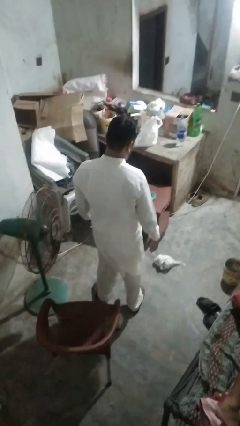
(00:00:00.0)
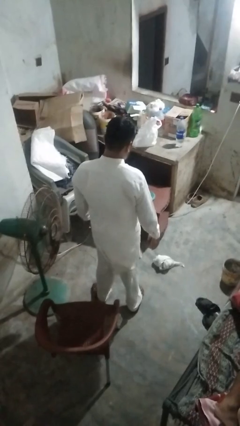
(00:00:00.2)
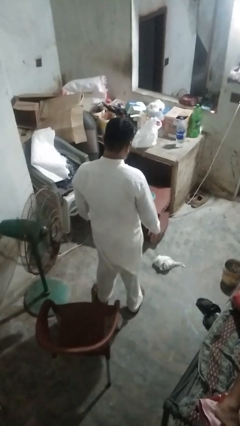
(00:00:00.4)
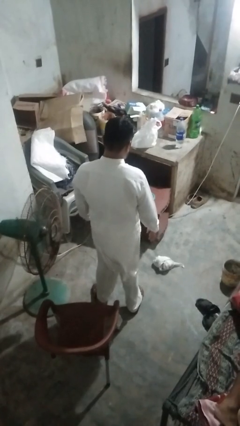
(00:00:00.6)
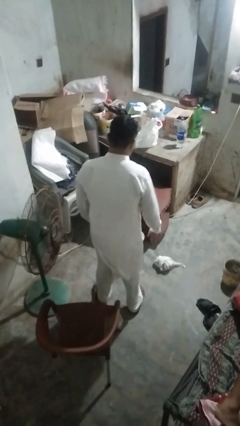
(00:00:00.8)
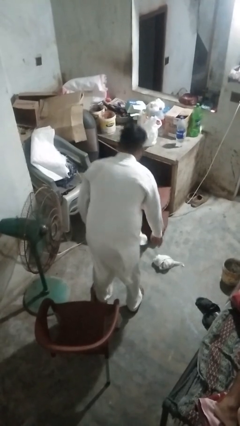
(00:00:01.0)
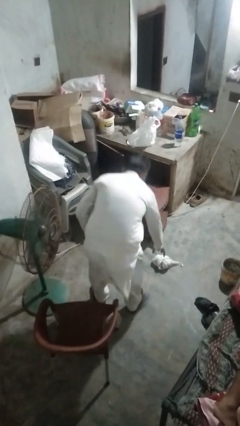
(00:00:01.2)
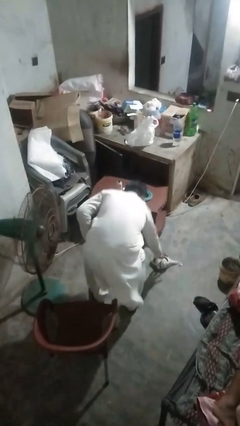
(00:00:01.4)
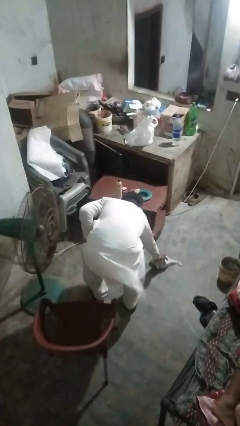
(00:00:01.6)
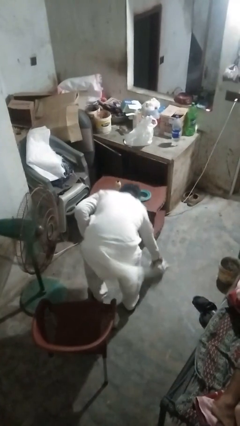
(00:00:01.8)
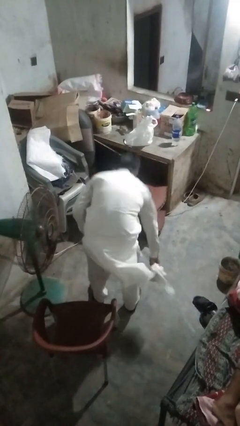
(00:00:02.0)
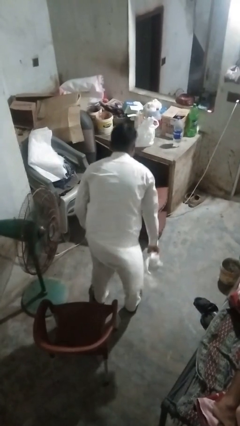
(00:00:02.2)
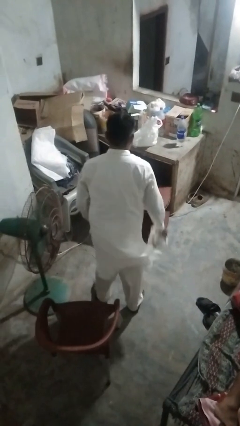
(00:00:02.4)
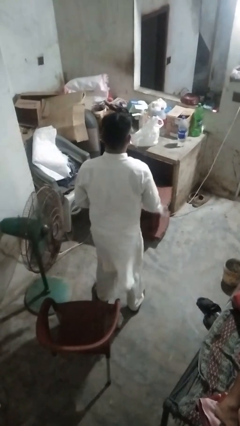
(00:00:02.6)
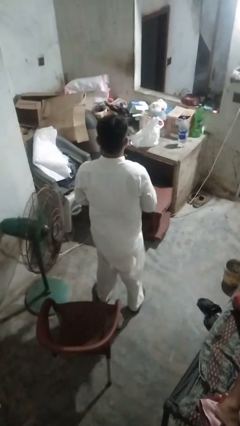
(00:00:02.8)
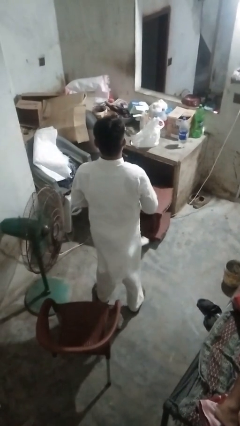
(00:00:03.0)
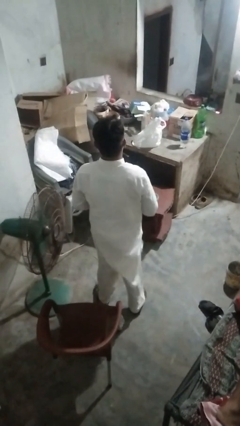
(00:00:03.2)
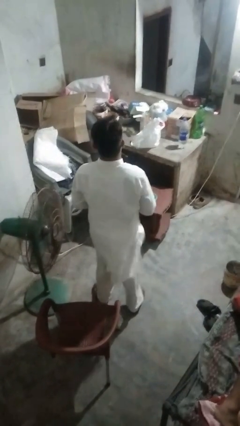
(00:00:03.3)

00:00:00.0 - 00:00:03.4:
person picks up object from floor

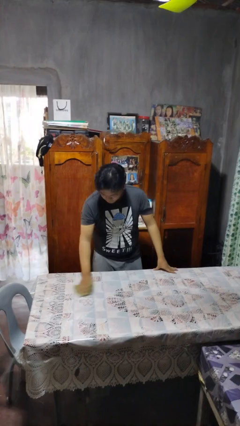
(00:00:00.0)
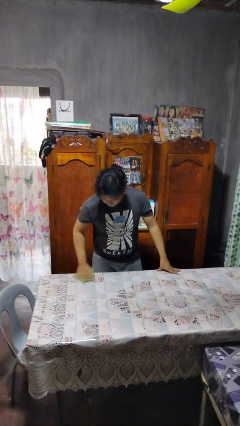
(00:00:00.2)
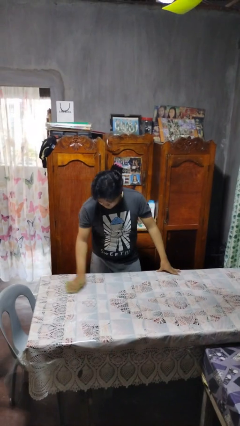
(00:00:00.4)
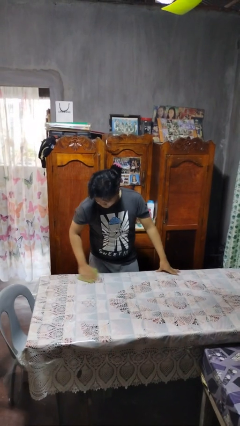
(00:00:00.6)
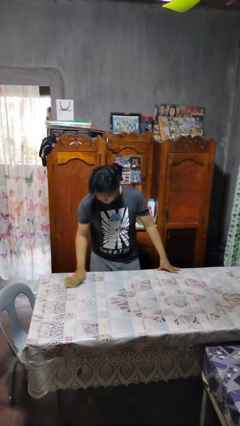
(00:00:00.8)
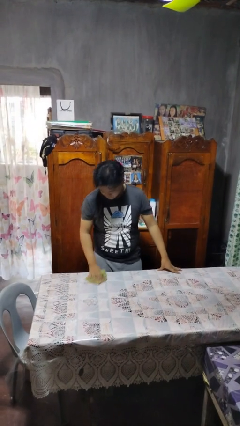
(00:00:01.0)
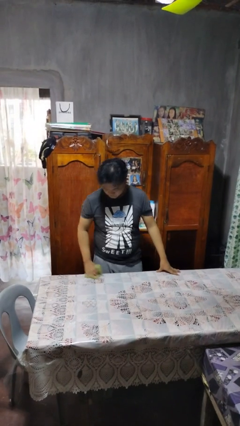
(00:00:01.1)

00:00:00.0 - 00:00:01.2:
person cleans table with rag

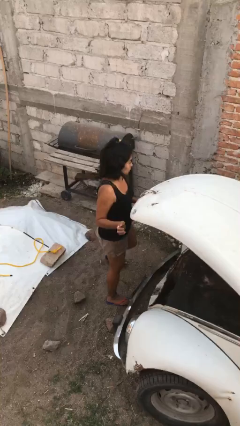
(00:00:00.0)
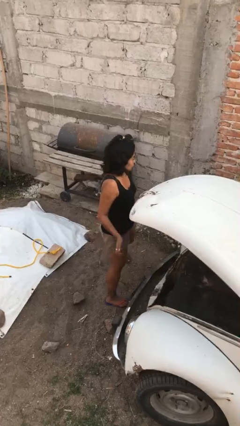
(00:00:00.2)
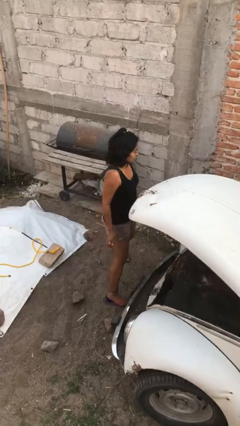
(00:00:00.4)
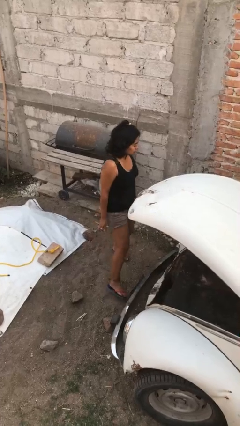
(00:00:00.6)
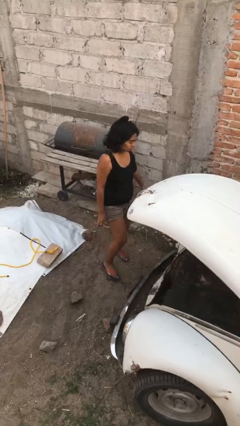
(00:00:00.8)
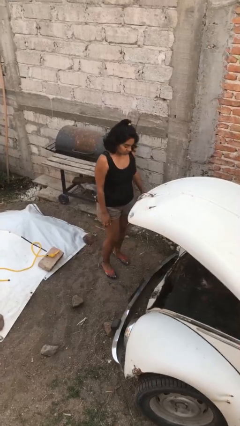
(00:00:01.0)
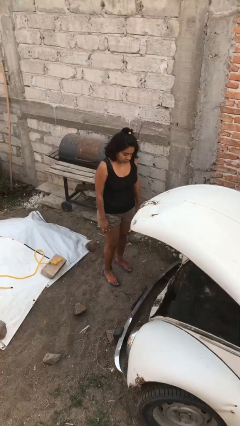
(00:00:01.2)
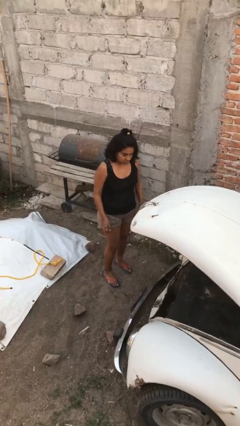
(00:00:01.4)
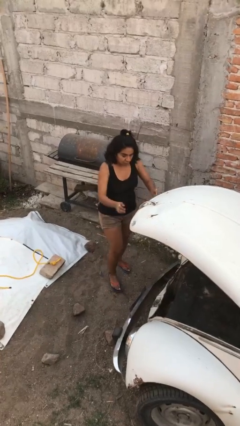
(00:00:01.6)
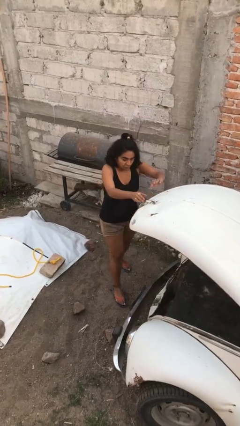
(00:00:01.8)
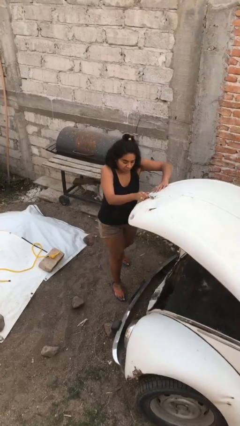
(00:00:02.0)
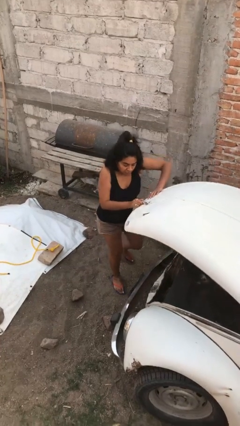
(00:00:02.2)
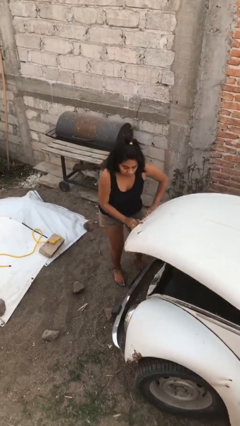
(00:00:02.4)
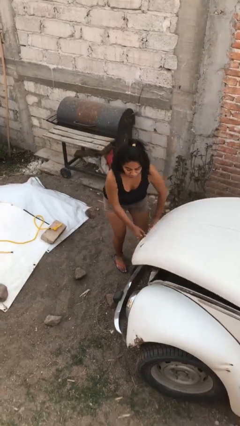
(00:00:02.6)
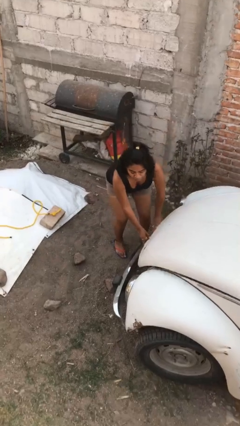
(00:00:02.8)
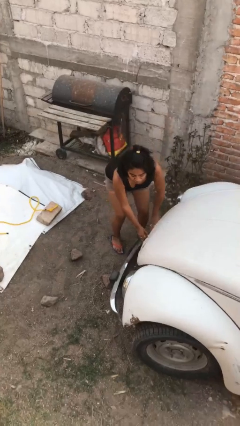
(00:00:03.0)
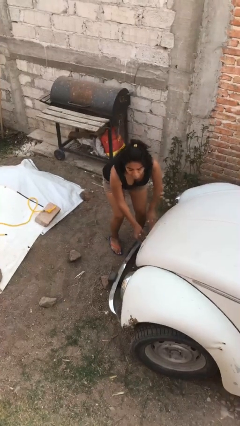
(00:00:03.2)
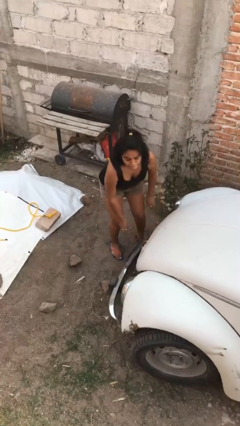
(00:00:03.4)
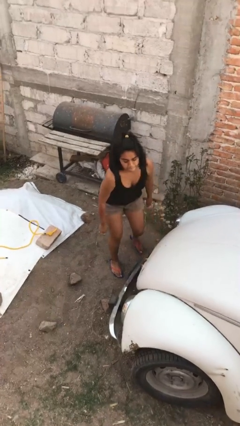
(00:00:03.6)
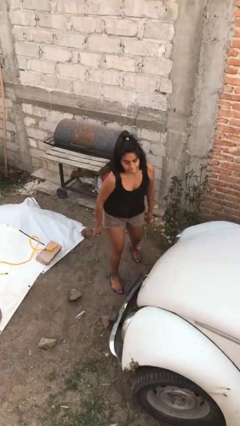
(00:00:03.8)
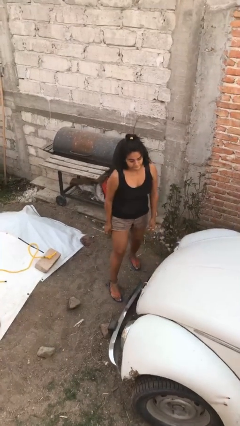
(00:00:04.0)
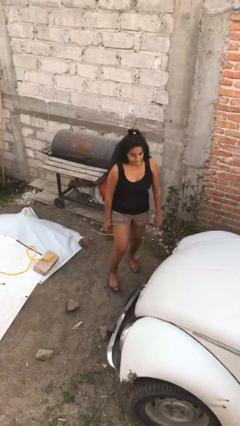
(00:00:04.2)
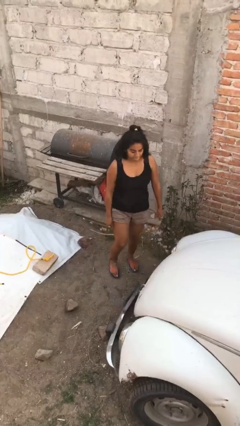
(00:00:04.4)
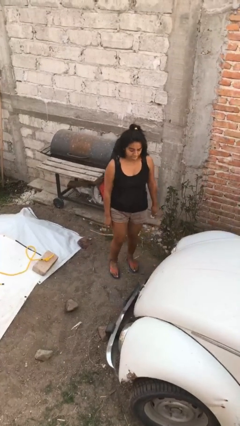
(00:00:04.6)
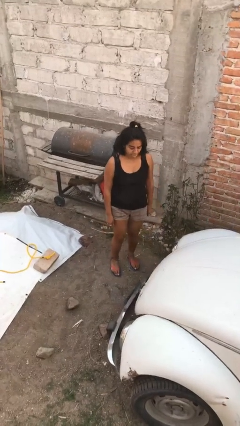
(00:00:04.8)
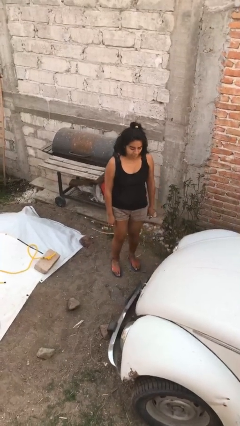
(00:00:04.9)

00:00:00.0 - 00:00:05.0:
person closes car trunk

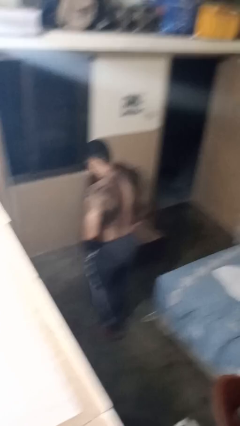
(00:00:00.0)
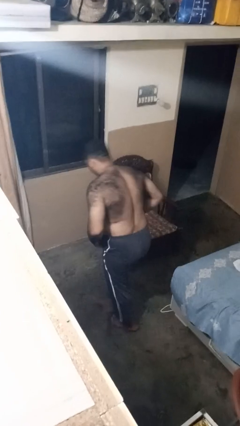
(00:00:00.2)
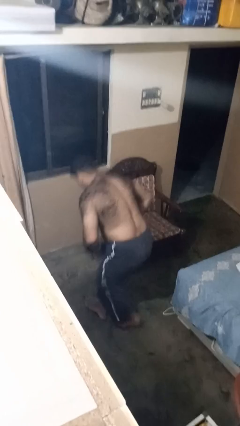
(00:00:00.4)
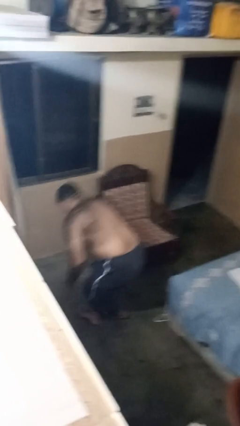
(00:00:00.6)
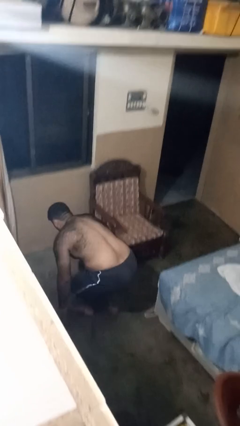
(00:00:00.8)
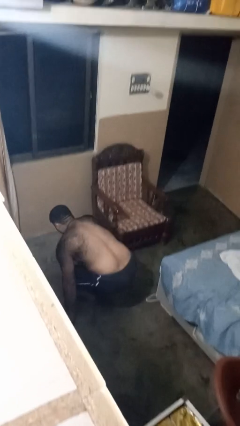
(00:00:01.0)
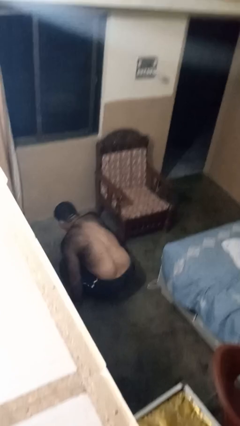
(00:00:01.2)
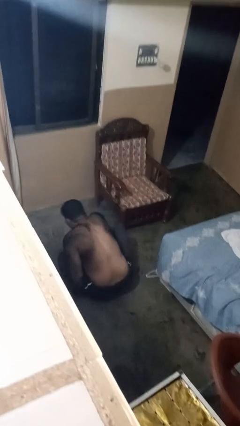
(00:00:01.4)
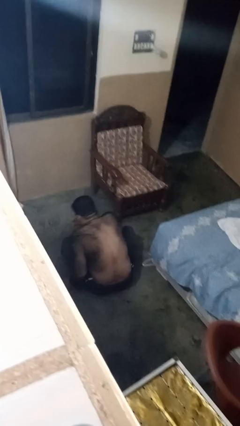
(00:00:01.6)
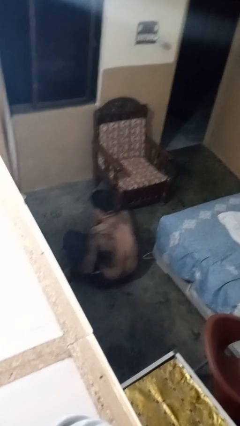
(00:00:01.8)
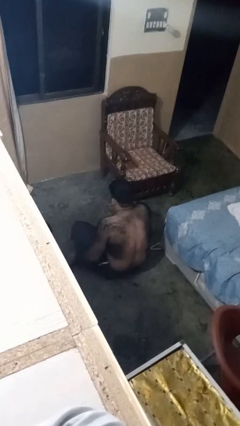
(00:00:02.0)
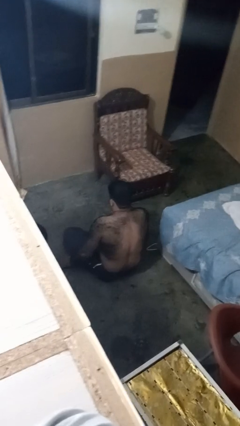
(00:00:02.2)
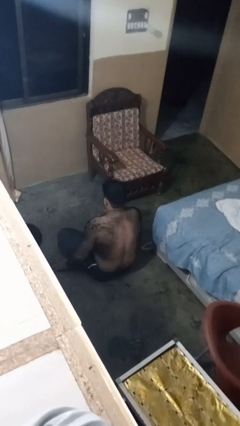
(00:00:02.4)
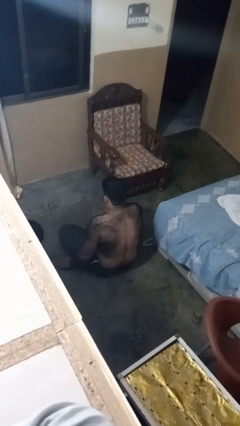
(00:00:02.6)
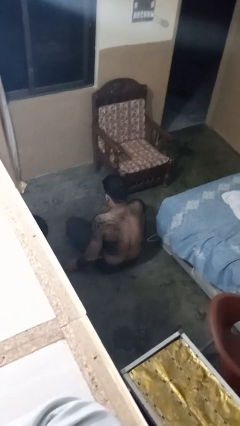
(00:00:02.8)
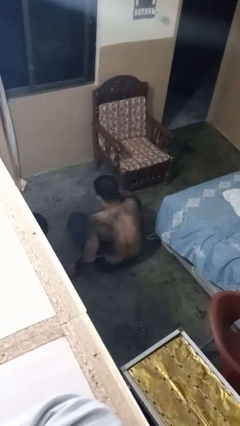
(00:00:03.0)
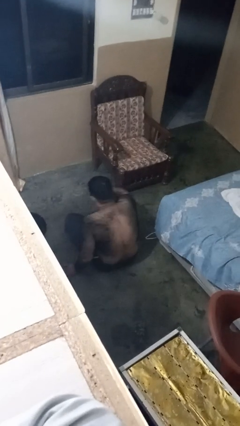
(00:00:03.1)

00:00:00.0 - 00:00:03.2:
person crosses legs

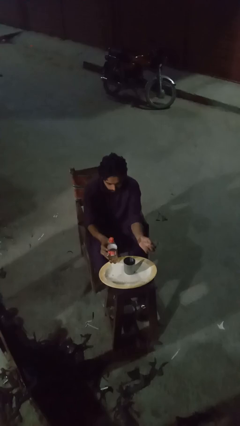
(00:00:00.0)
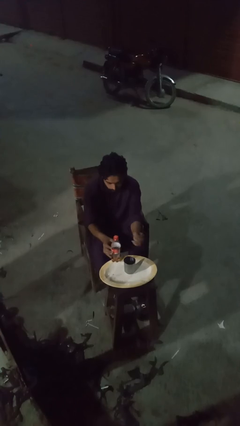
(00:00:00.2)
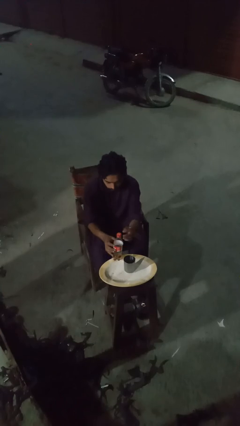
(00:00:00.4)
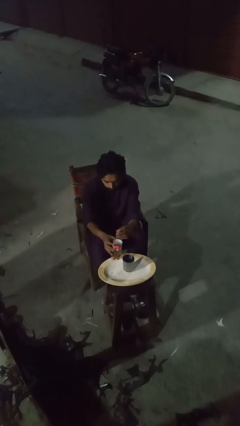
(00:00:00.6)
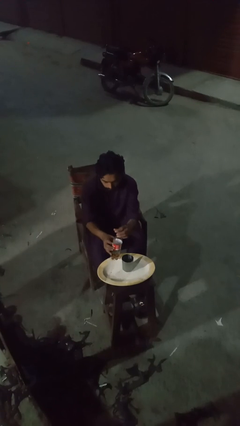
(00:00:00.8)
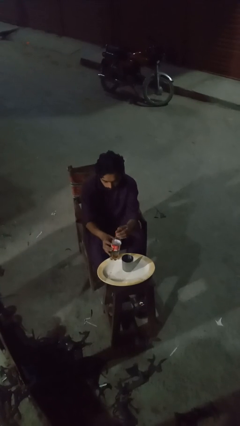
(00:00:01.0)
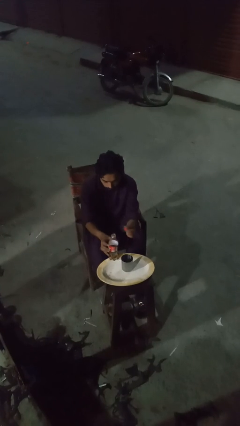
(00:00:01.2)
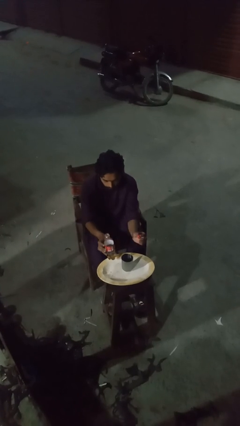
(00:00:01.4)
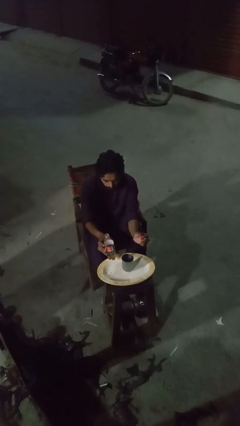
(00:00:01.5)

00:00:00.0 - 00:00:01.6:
person unscrews lid from bottle

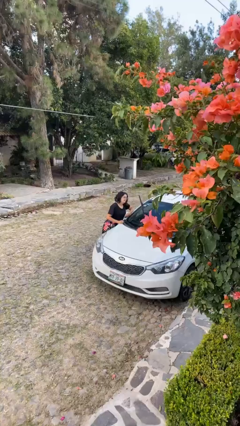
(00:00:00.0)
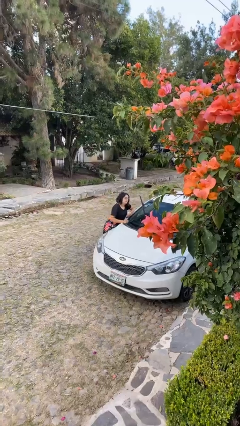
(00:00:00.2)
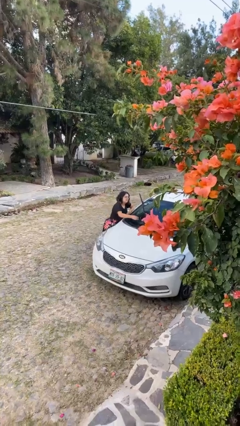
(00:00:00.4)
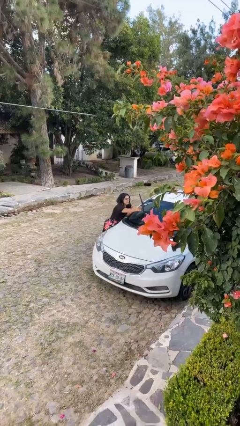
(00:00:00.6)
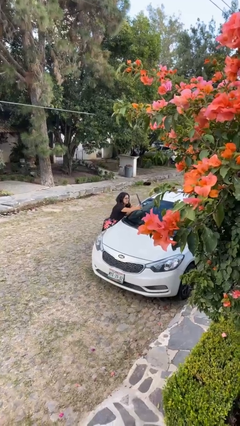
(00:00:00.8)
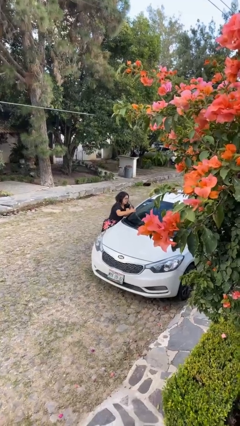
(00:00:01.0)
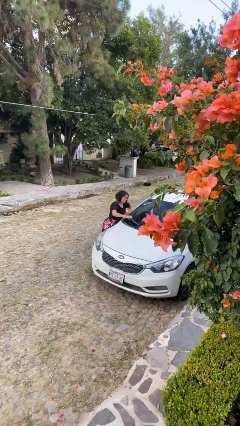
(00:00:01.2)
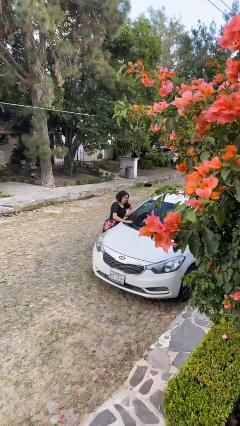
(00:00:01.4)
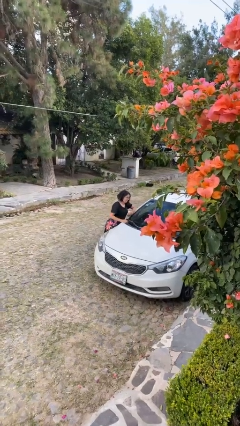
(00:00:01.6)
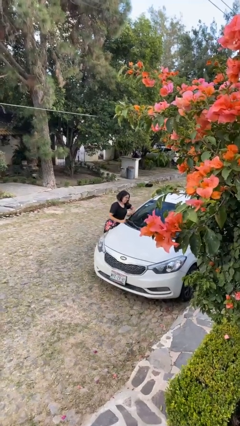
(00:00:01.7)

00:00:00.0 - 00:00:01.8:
person flips down car wipers

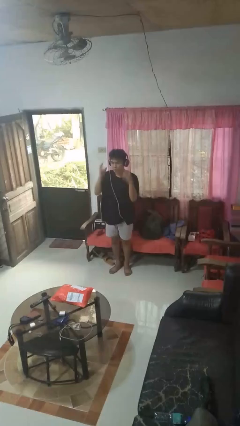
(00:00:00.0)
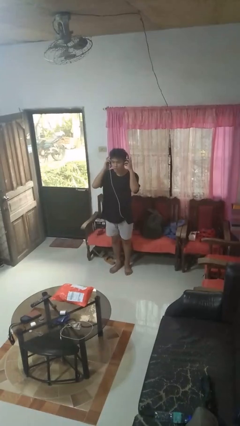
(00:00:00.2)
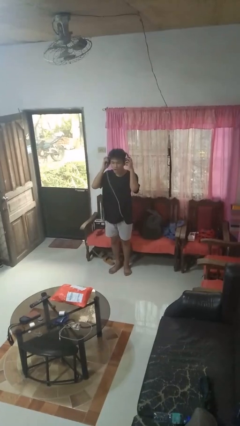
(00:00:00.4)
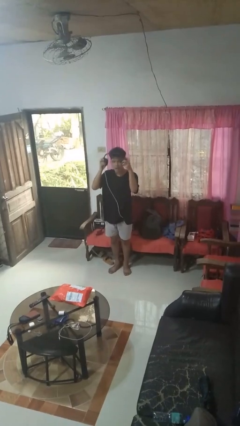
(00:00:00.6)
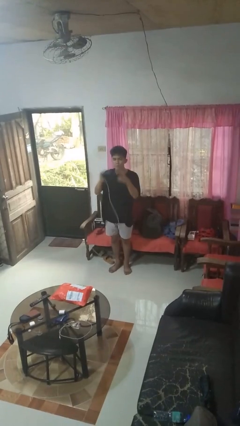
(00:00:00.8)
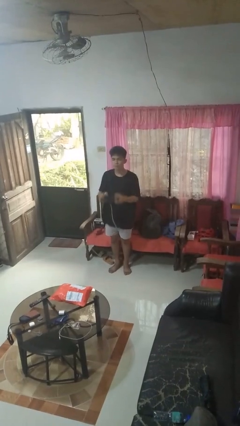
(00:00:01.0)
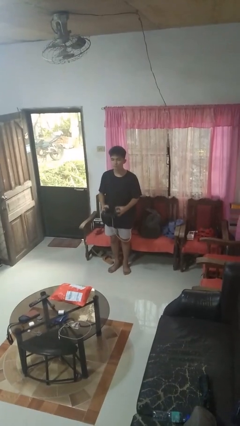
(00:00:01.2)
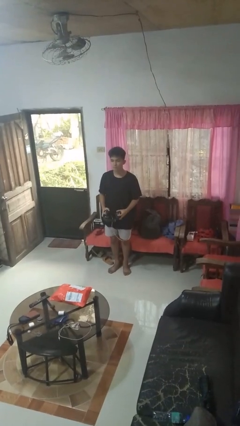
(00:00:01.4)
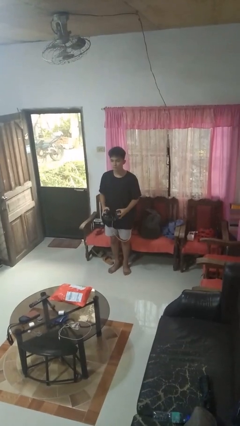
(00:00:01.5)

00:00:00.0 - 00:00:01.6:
person takes off headphones
